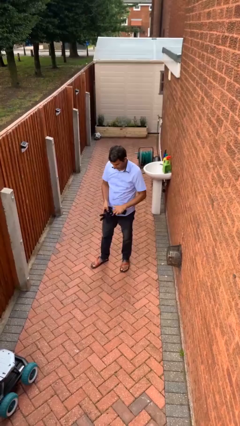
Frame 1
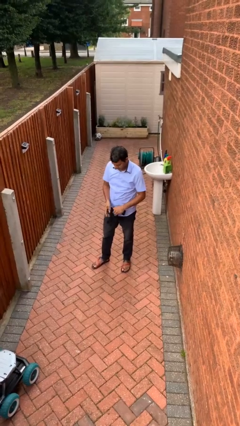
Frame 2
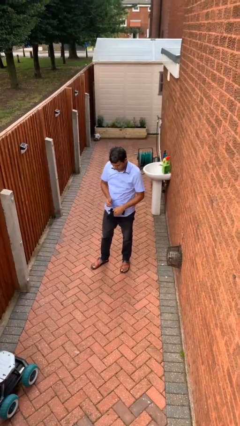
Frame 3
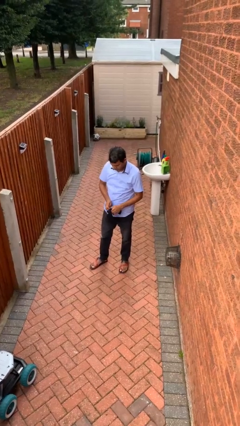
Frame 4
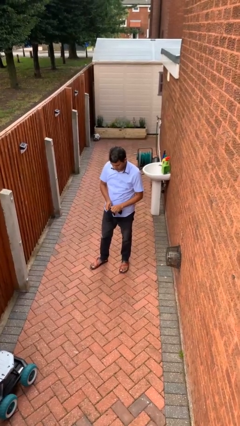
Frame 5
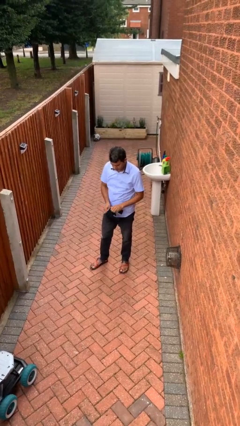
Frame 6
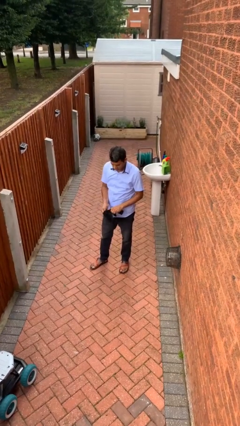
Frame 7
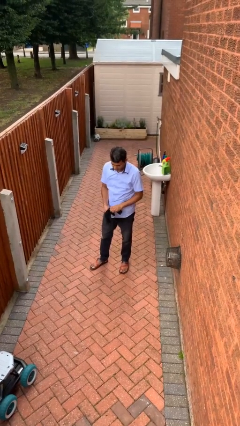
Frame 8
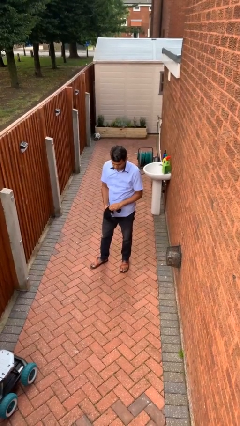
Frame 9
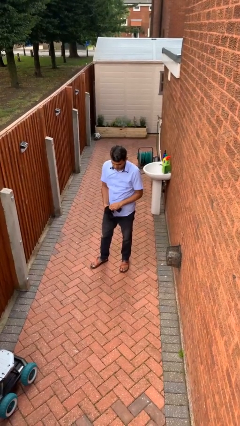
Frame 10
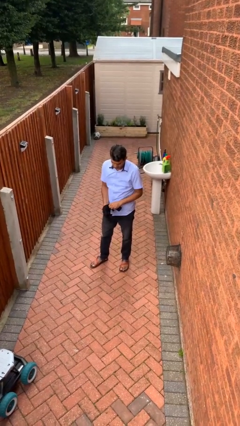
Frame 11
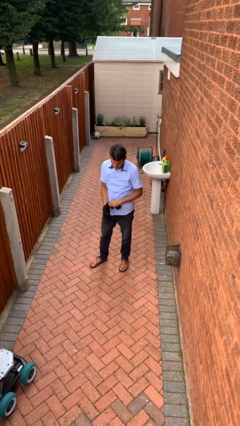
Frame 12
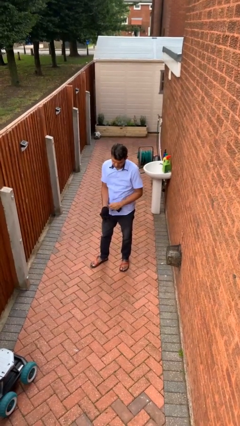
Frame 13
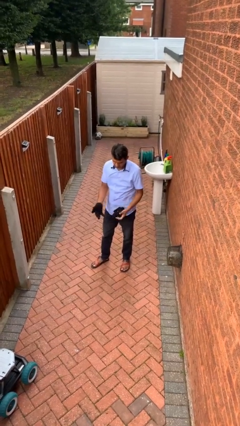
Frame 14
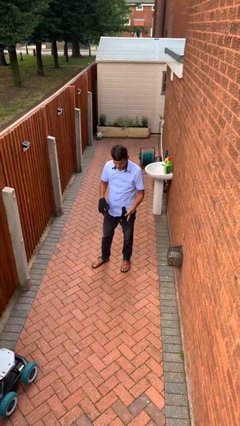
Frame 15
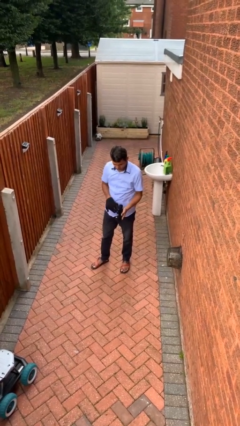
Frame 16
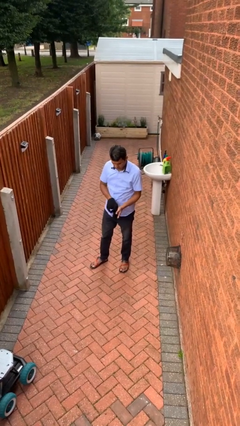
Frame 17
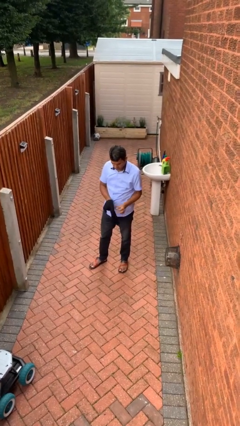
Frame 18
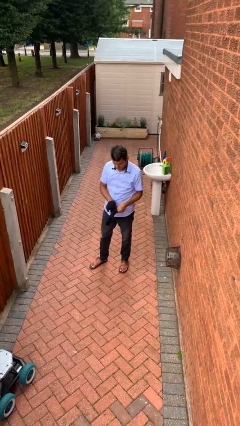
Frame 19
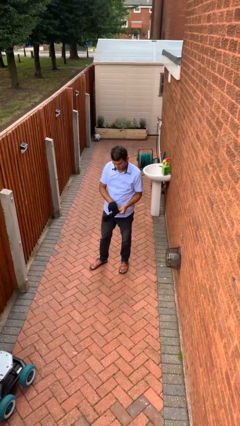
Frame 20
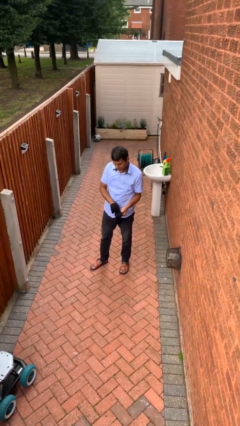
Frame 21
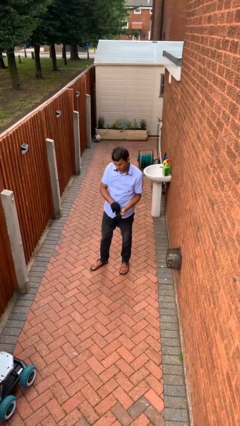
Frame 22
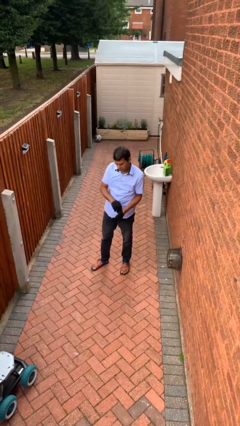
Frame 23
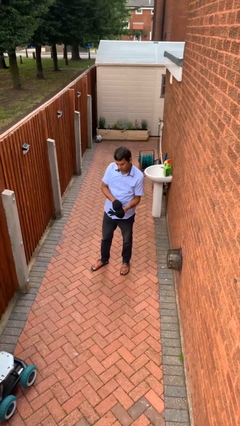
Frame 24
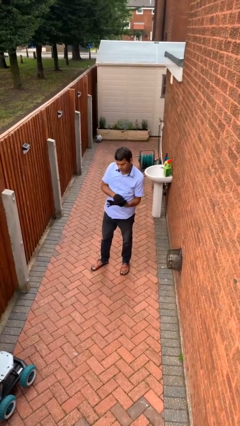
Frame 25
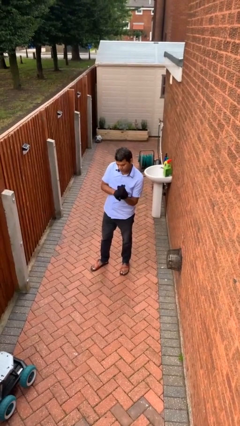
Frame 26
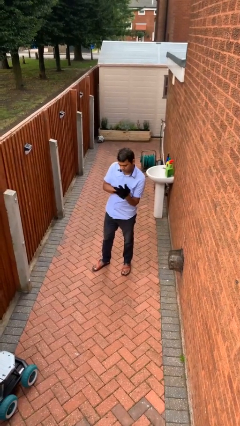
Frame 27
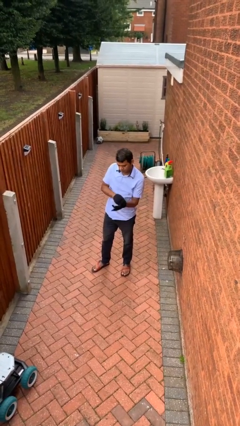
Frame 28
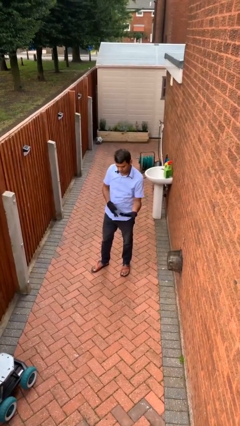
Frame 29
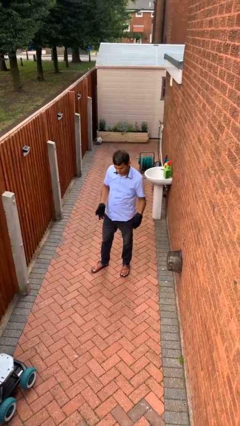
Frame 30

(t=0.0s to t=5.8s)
person puts on gloves

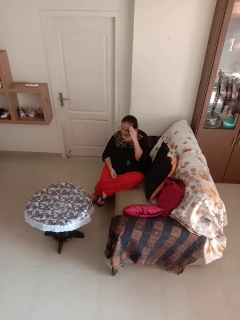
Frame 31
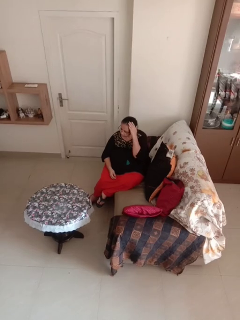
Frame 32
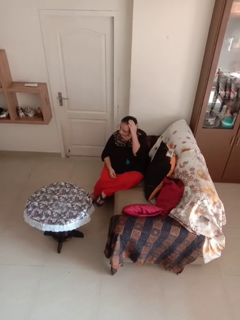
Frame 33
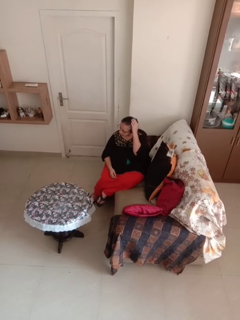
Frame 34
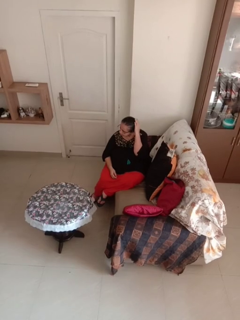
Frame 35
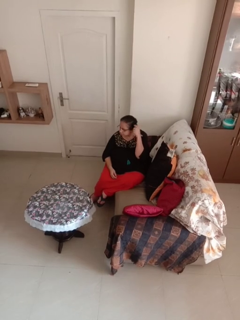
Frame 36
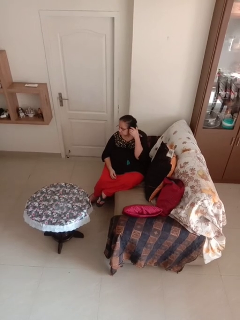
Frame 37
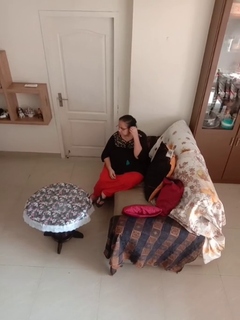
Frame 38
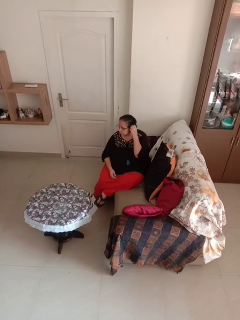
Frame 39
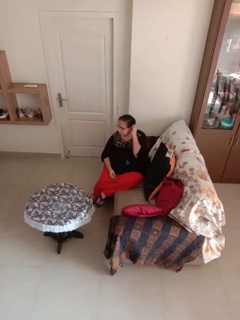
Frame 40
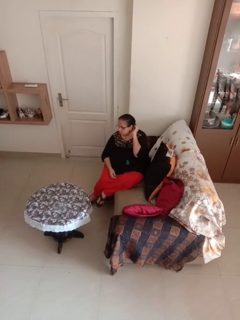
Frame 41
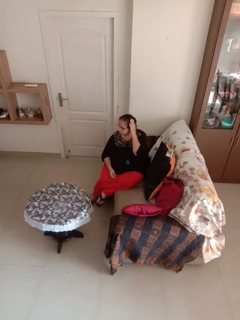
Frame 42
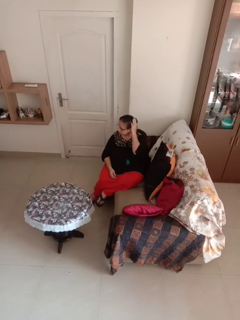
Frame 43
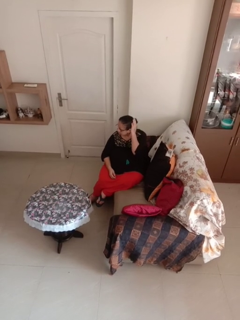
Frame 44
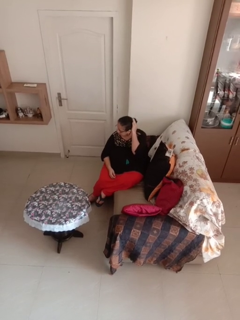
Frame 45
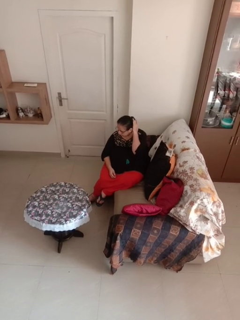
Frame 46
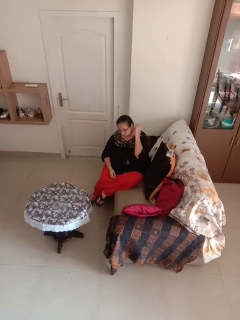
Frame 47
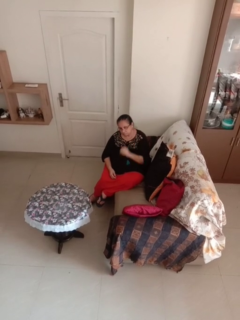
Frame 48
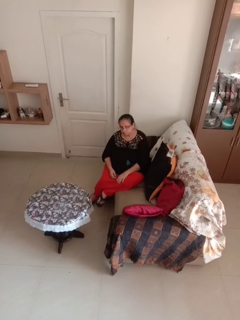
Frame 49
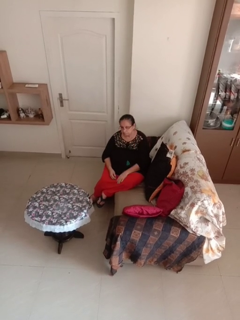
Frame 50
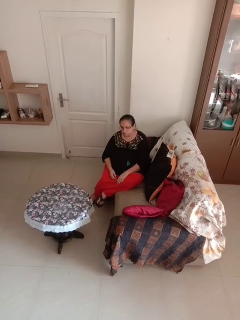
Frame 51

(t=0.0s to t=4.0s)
person strokes hair

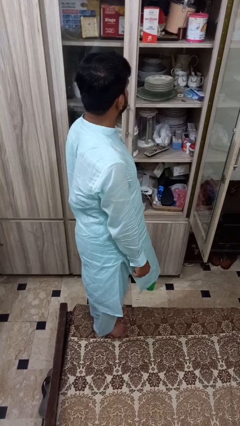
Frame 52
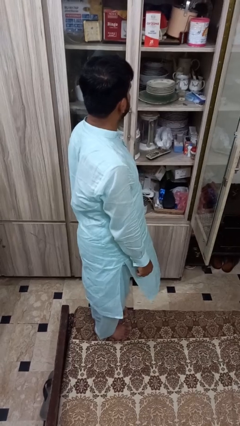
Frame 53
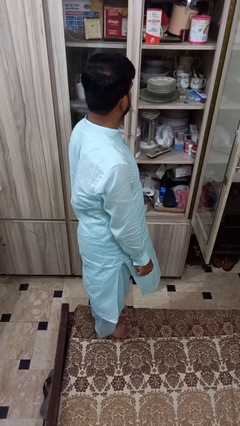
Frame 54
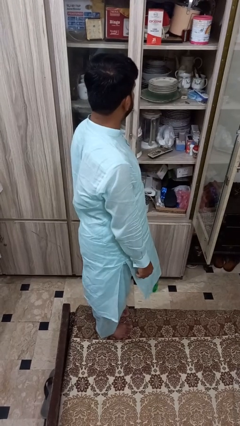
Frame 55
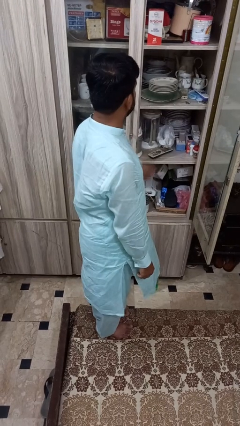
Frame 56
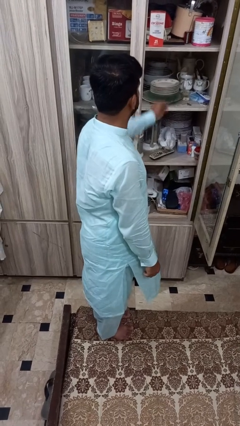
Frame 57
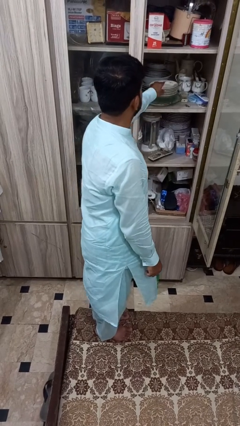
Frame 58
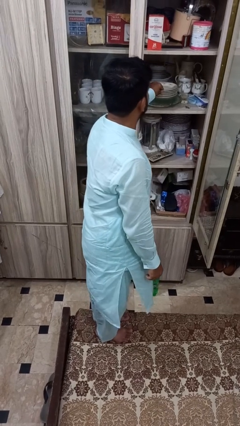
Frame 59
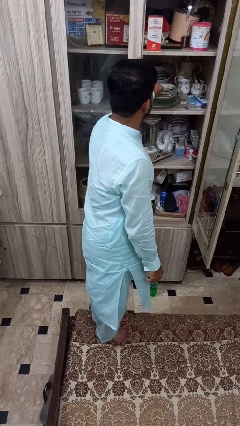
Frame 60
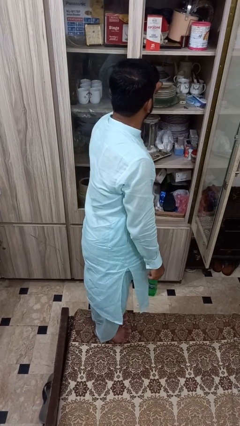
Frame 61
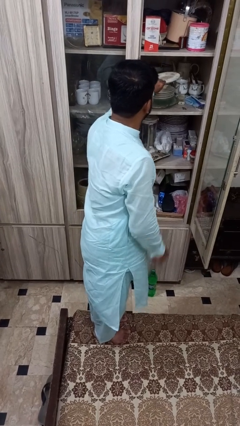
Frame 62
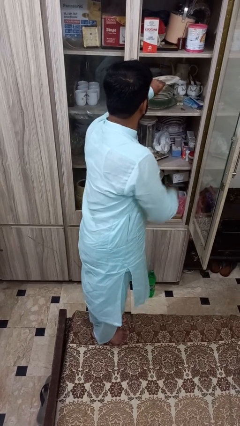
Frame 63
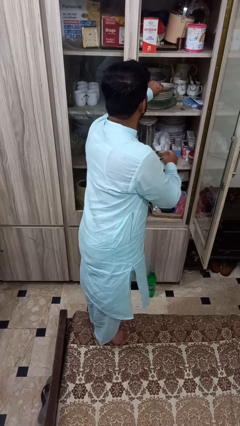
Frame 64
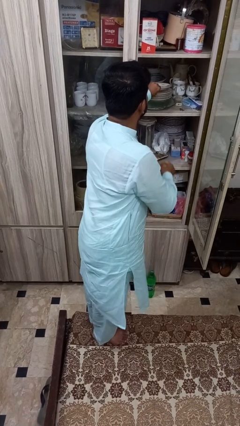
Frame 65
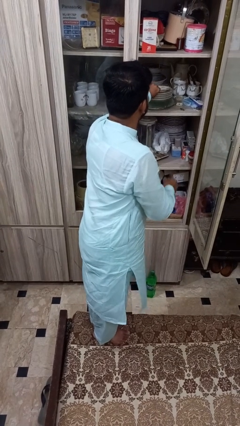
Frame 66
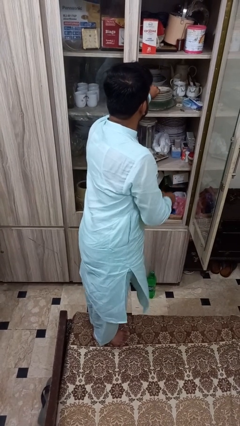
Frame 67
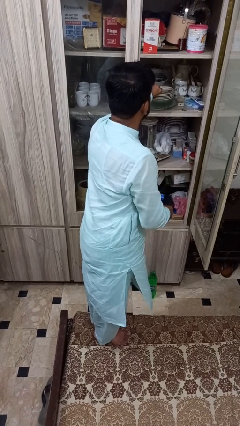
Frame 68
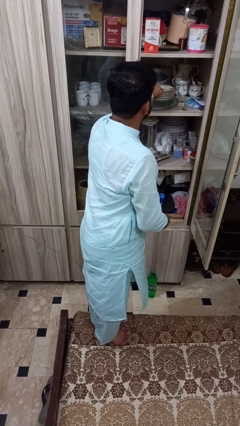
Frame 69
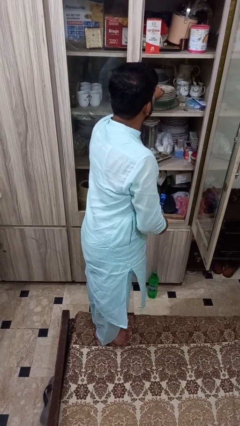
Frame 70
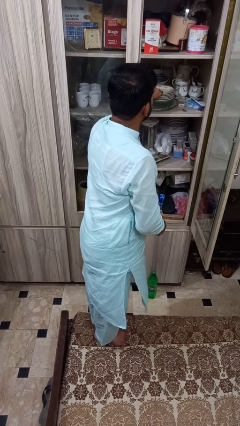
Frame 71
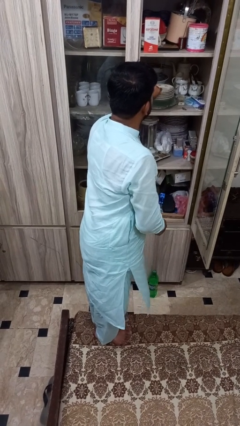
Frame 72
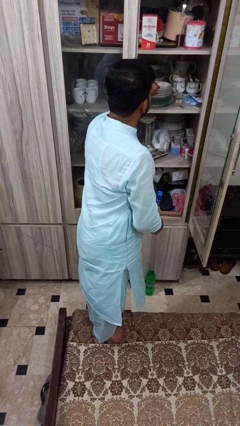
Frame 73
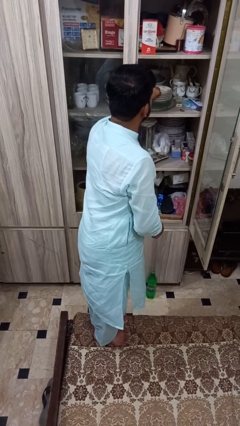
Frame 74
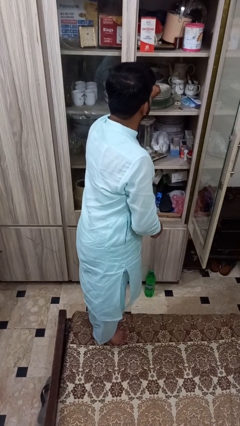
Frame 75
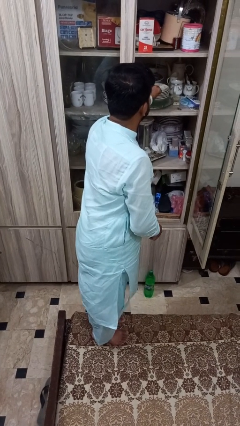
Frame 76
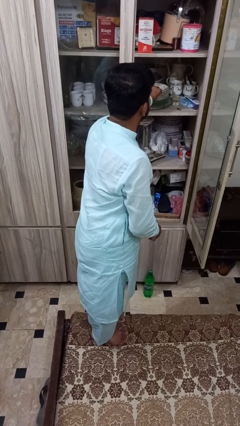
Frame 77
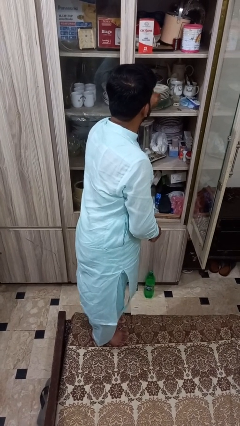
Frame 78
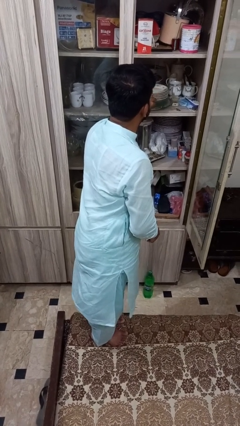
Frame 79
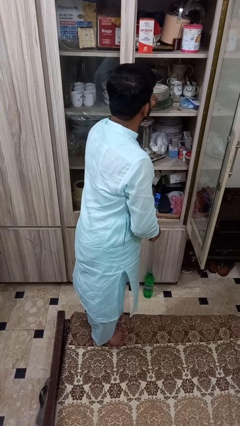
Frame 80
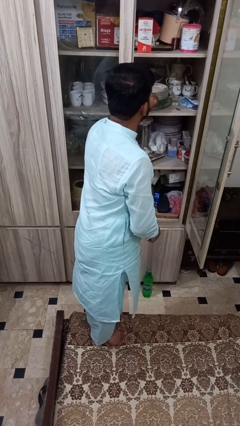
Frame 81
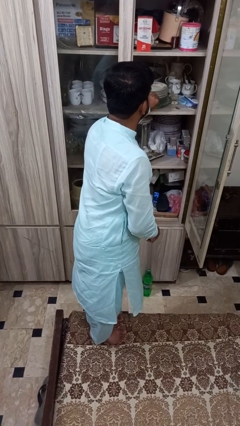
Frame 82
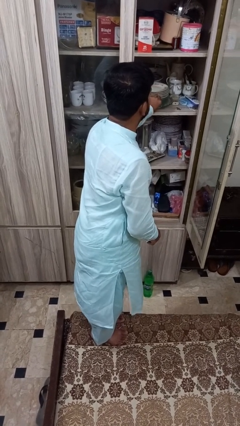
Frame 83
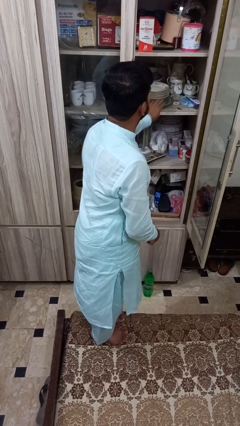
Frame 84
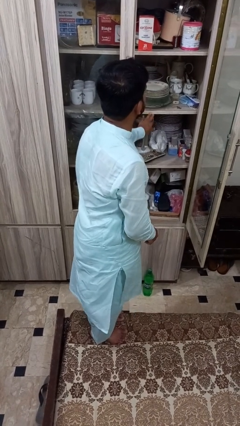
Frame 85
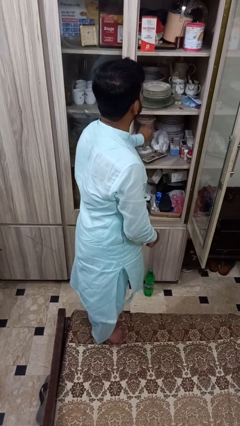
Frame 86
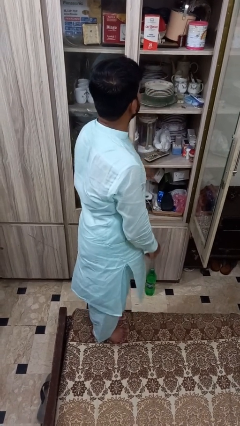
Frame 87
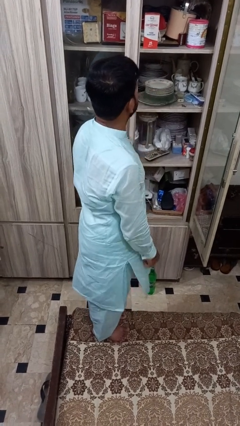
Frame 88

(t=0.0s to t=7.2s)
person loads groceries into cabinet

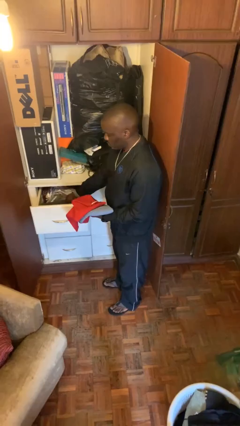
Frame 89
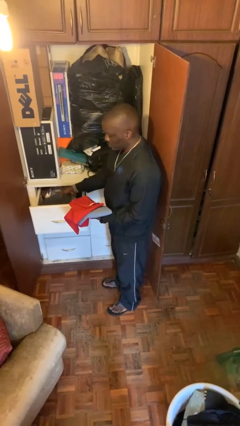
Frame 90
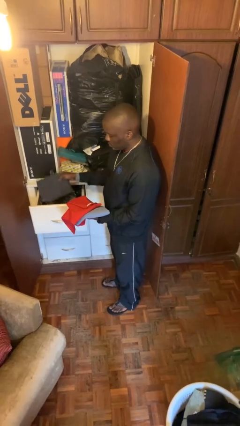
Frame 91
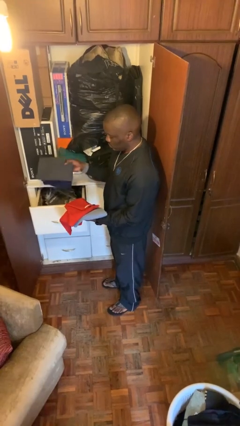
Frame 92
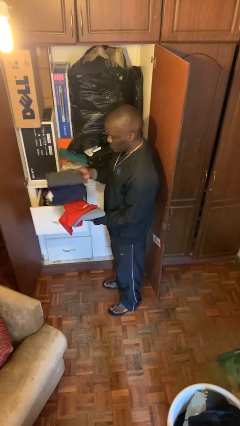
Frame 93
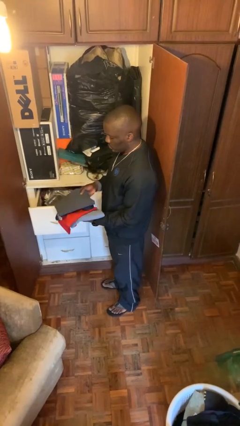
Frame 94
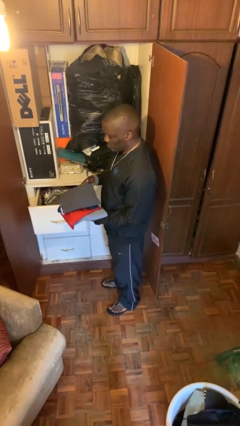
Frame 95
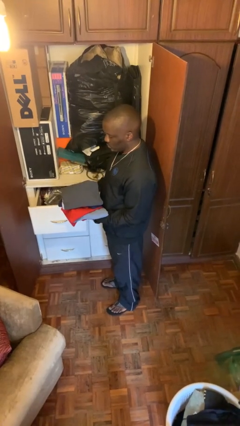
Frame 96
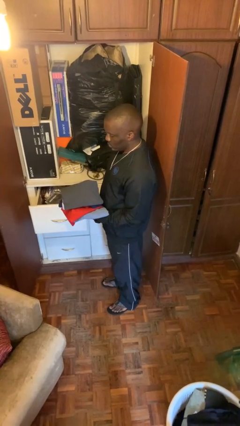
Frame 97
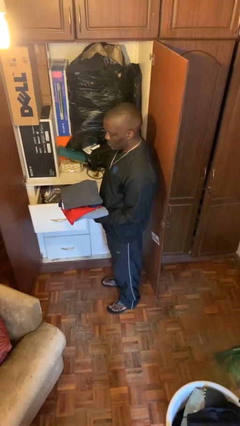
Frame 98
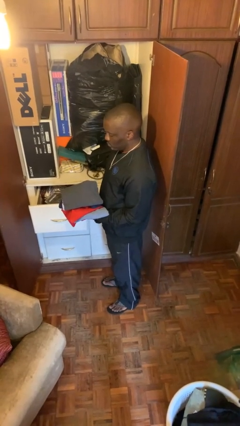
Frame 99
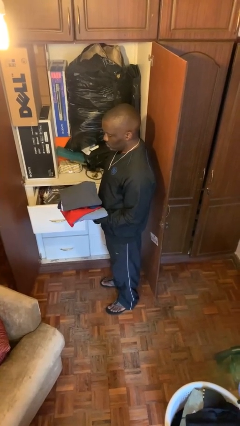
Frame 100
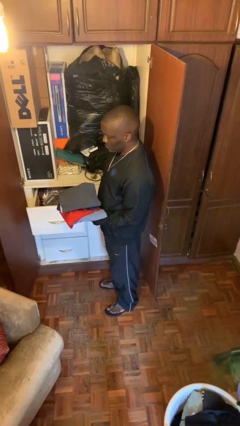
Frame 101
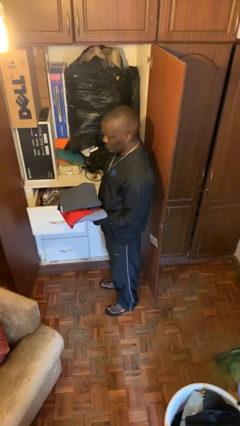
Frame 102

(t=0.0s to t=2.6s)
person takes clothes from dresser
